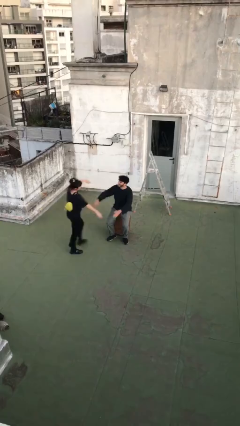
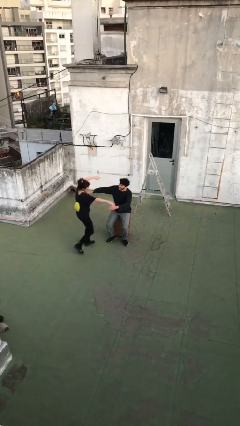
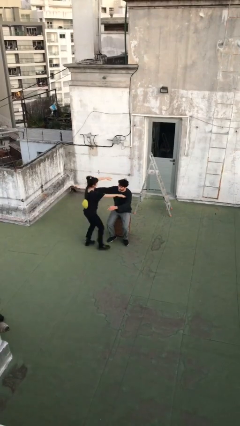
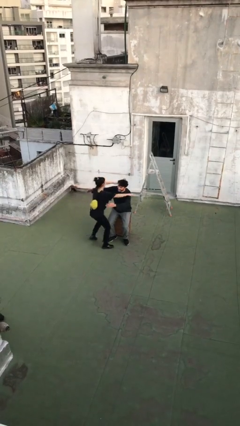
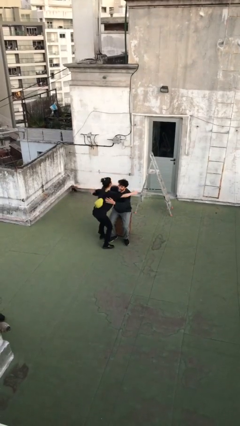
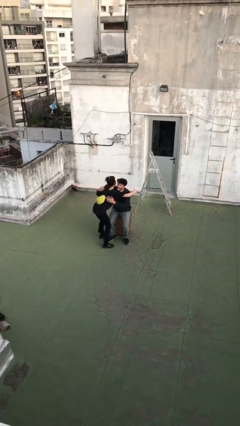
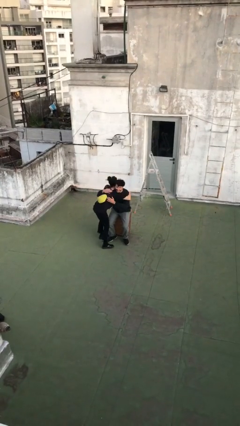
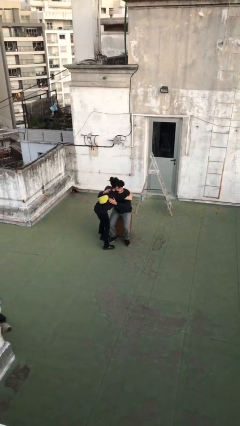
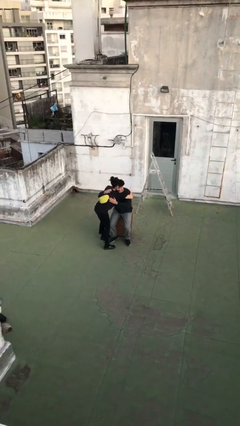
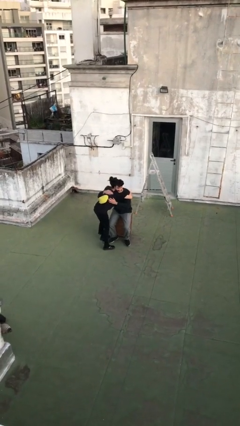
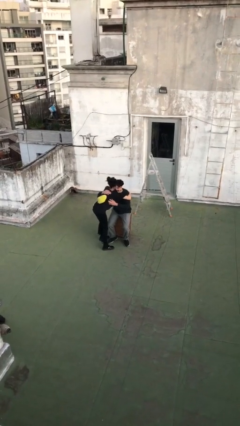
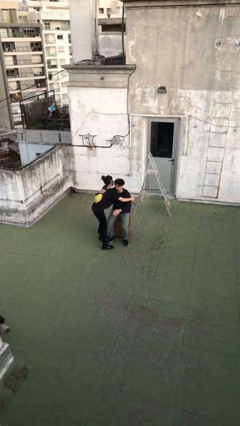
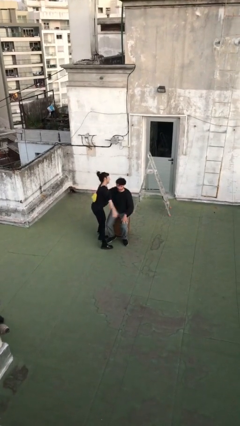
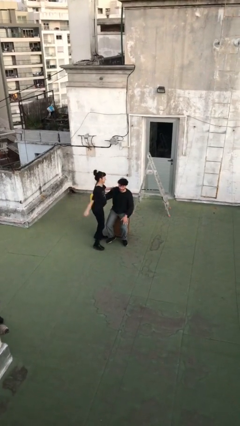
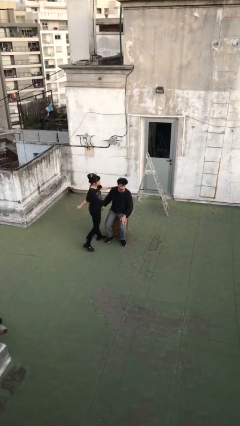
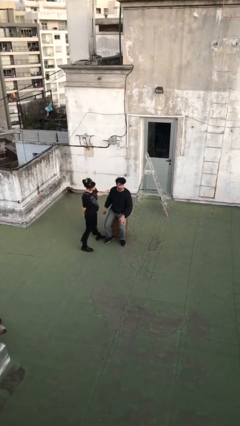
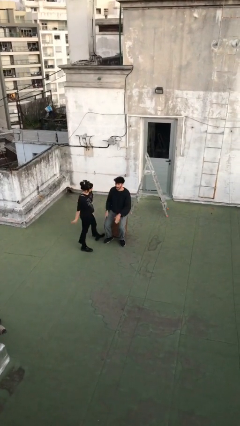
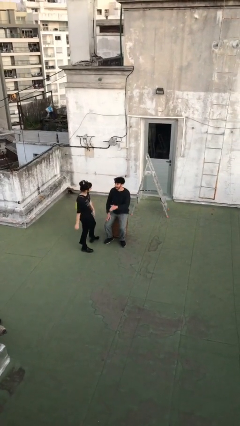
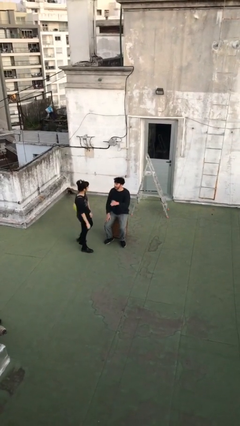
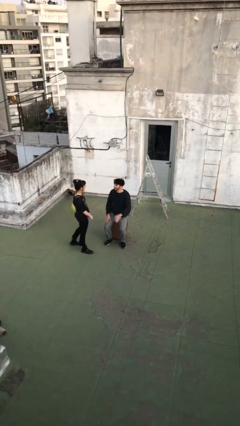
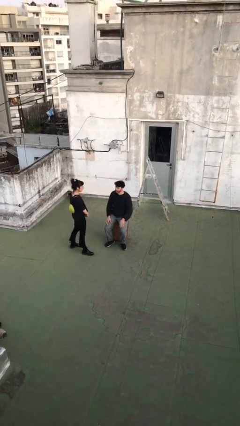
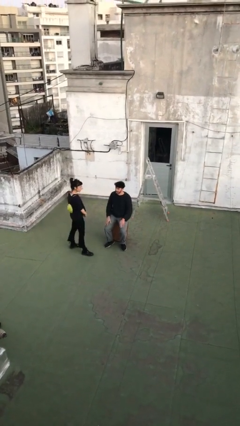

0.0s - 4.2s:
person embraces person

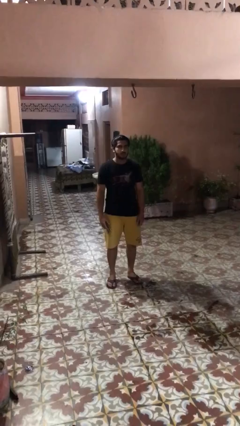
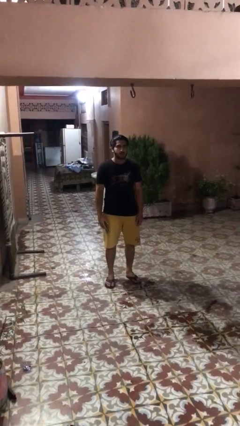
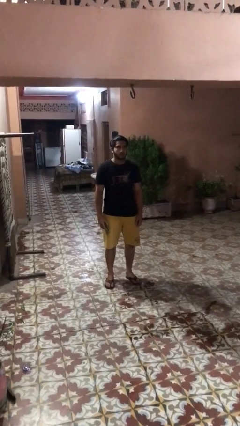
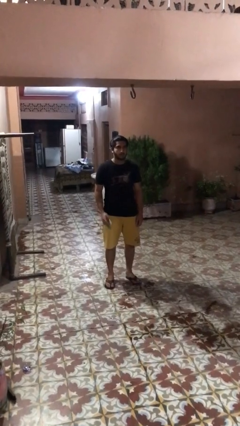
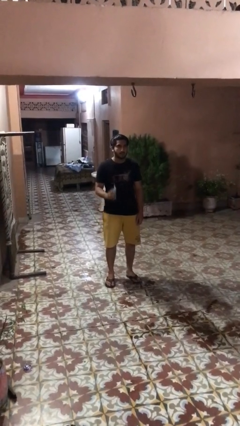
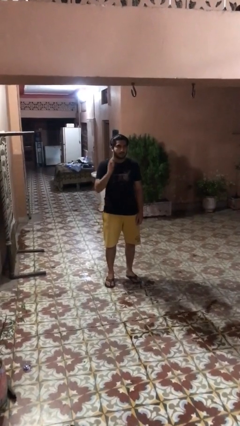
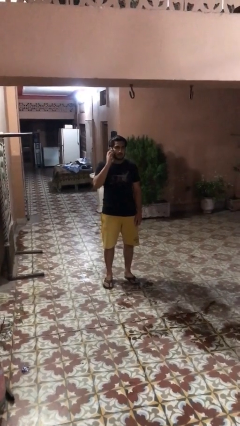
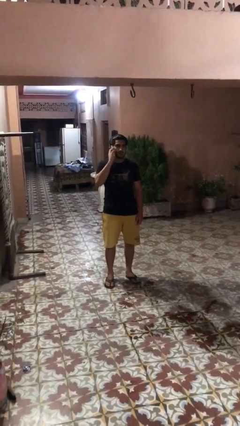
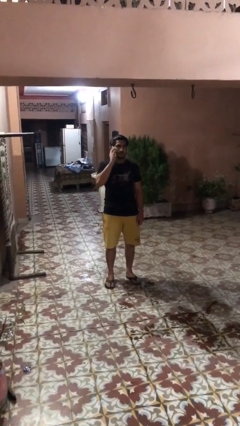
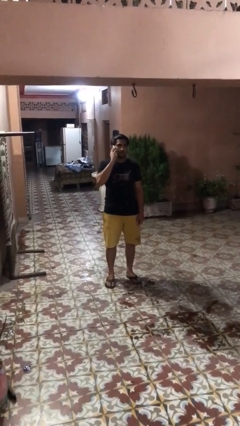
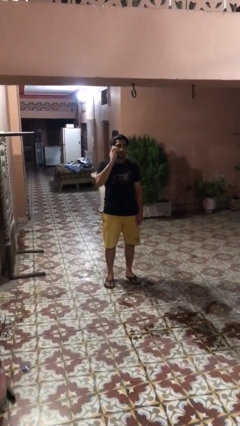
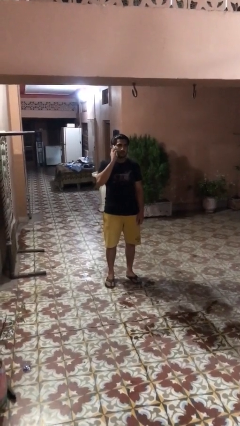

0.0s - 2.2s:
person gestures call me

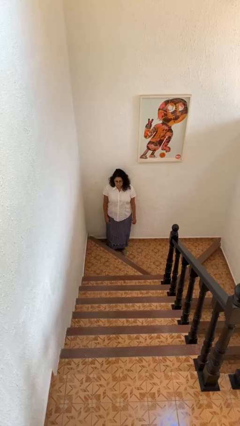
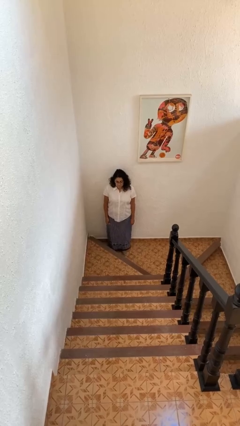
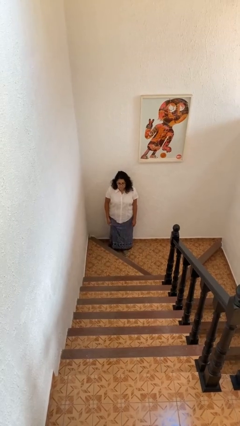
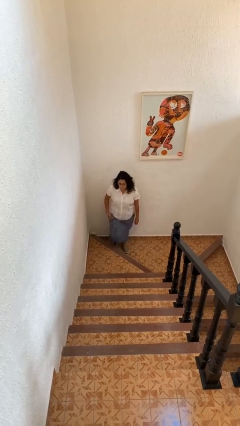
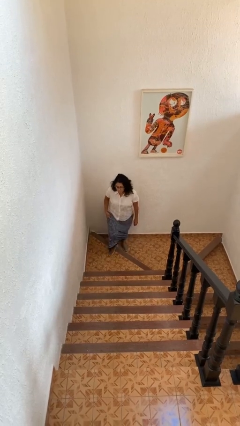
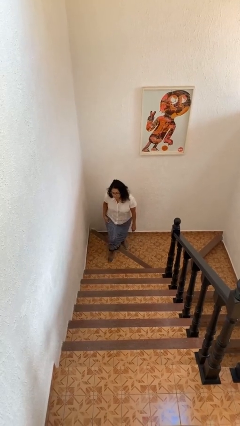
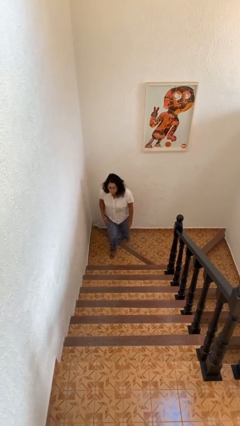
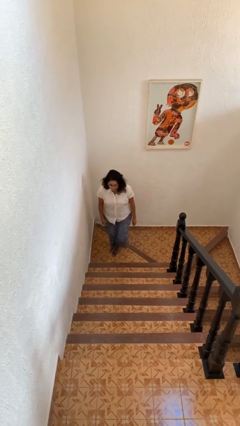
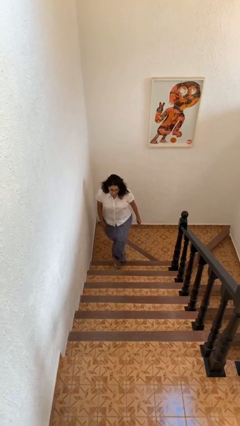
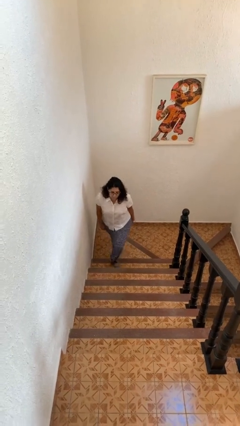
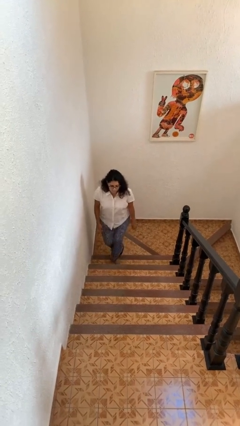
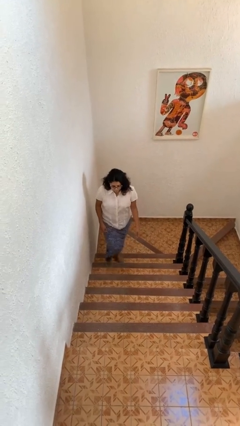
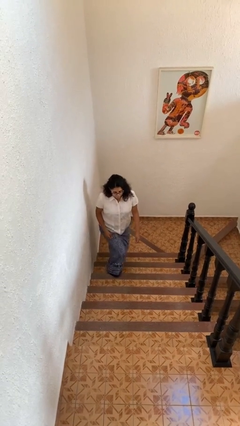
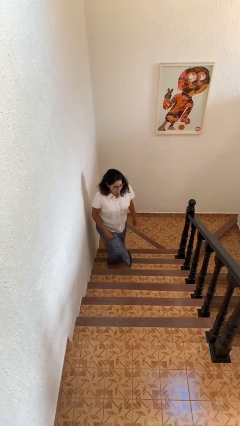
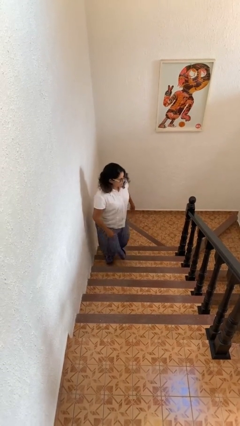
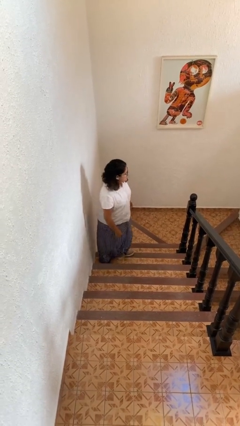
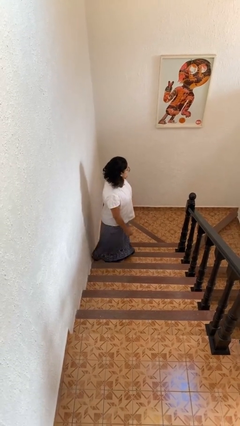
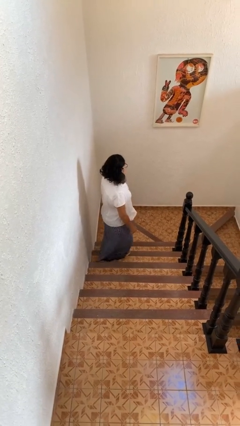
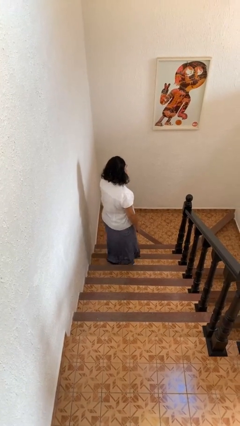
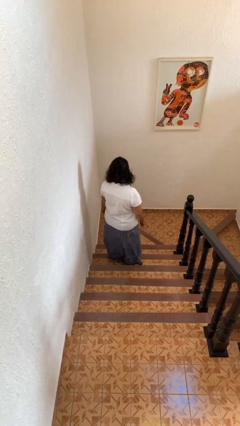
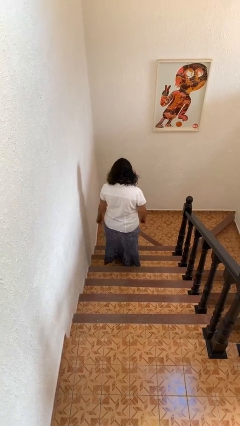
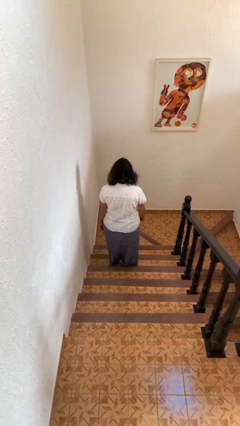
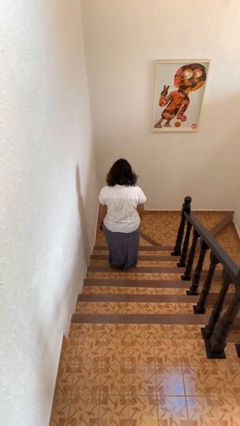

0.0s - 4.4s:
person climbs up stairs

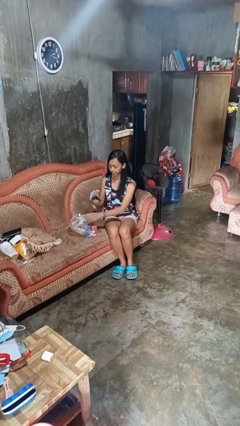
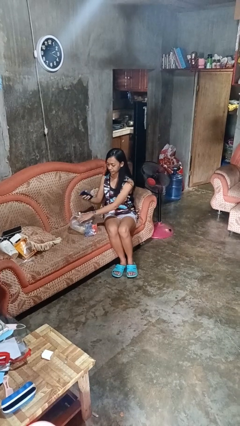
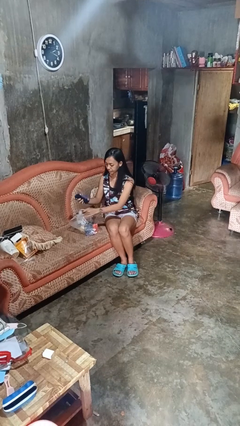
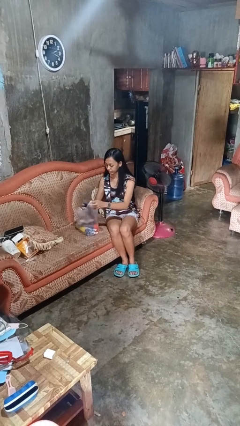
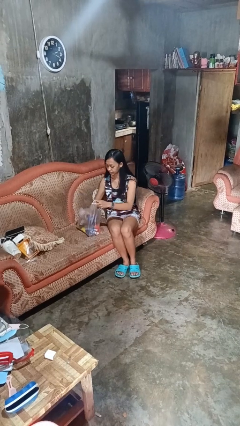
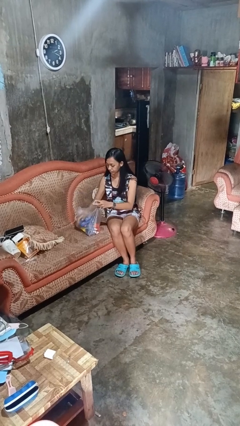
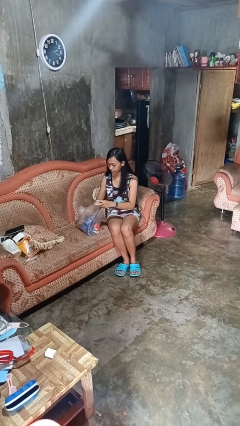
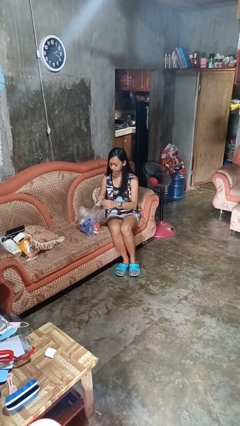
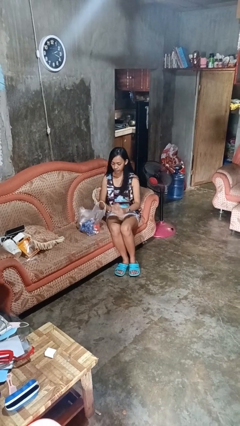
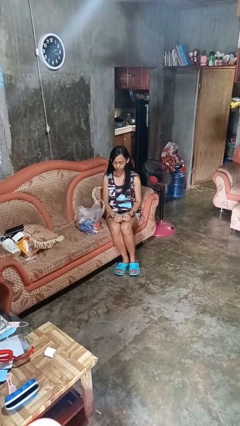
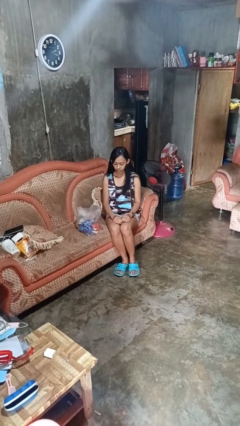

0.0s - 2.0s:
person puts object into bag

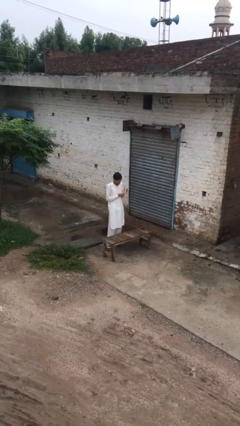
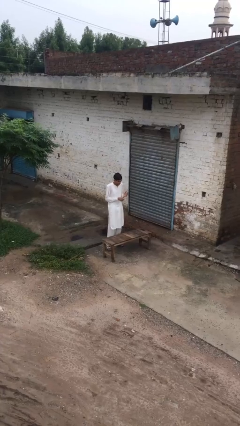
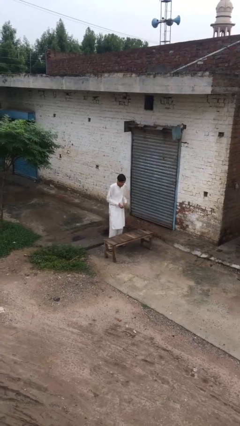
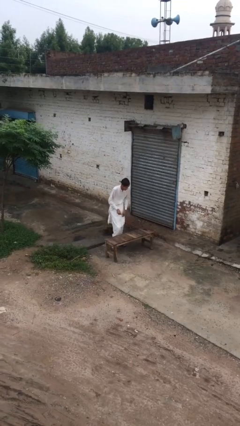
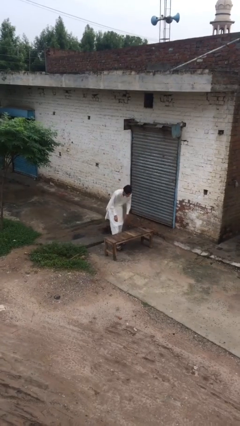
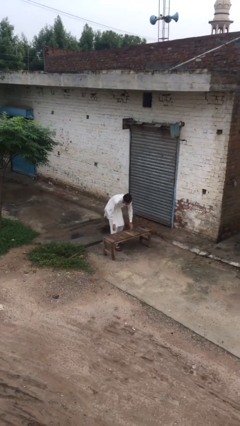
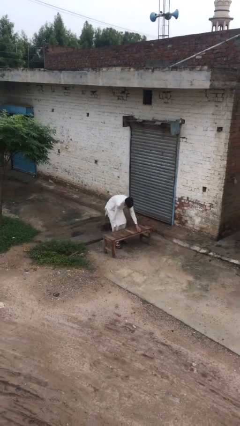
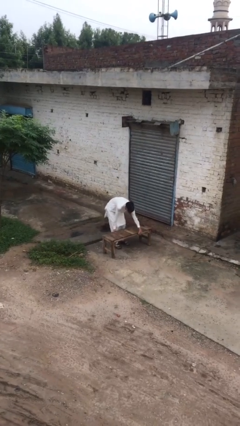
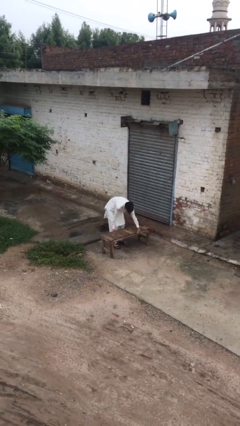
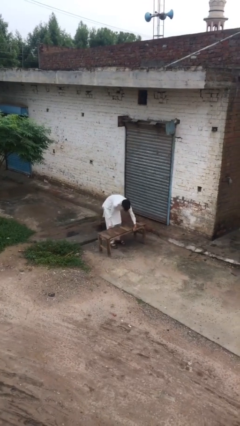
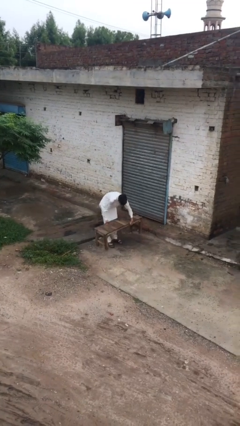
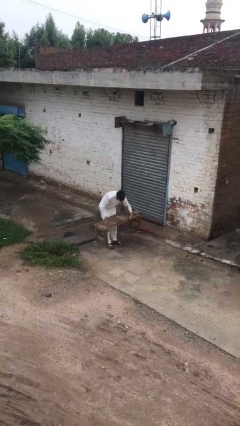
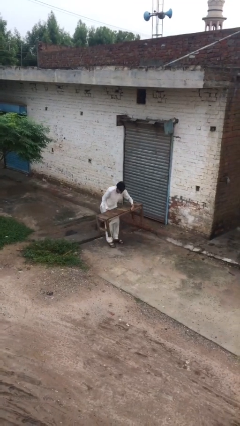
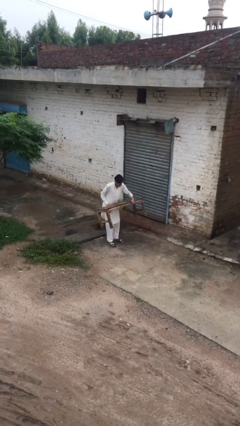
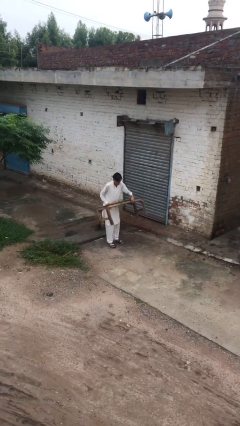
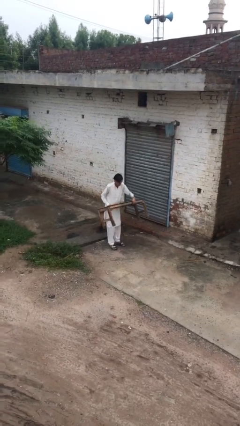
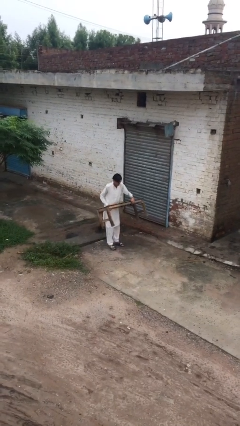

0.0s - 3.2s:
person picks up object from floor

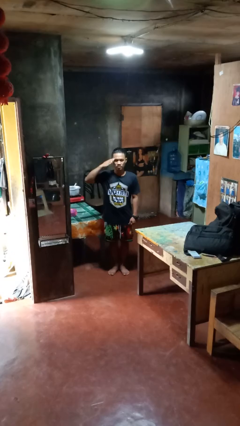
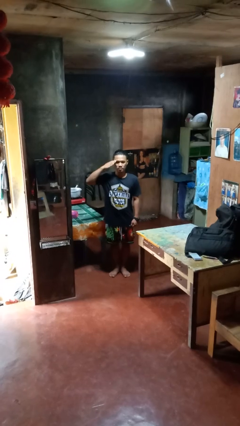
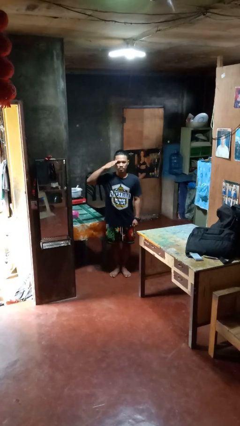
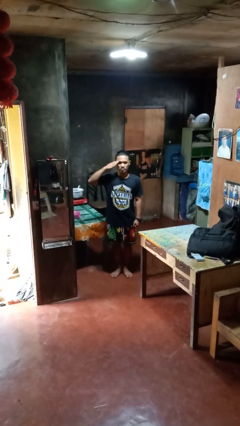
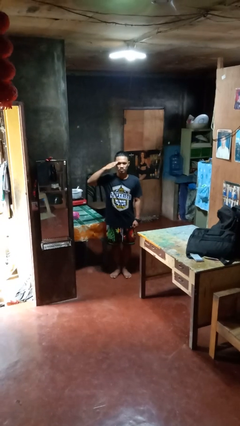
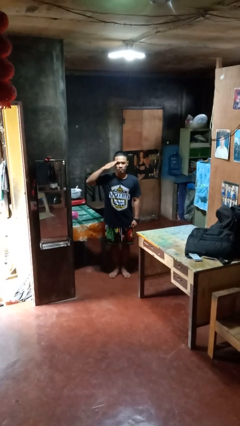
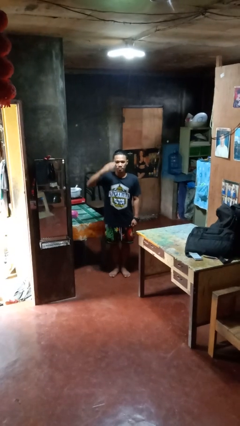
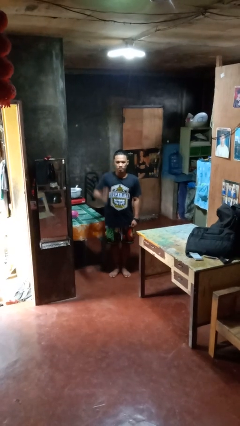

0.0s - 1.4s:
person salutes

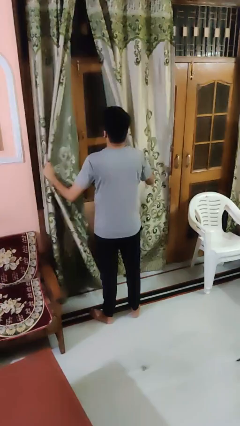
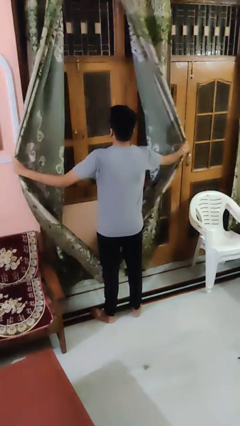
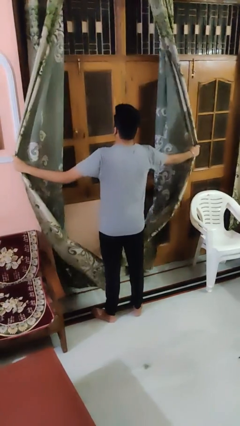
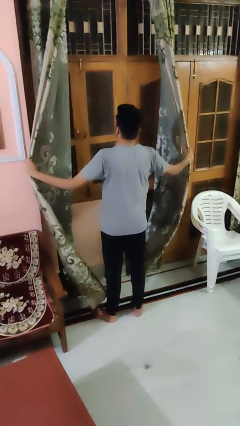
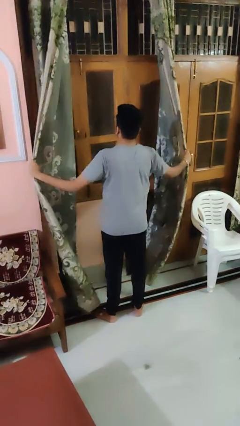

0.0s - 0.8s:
person opens curtains
